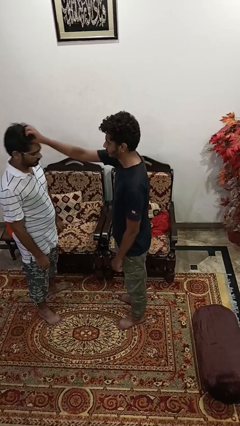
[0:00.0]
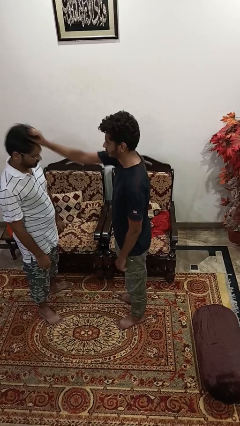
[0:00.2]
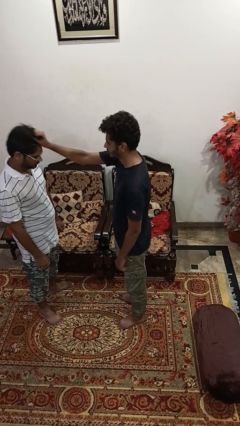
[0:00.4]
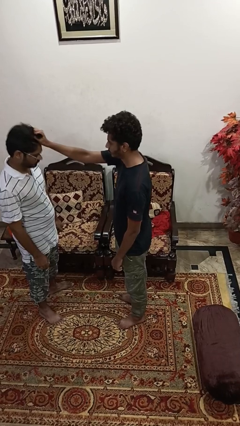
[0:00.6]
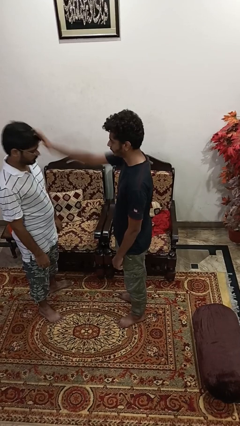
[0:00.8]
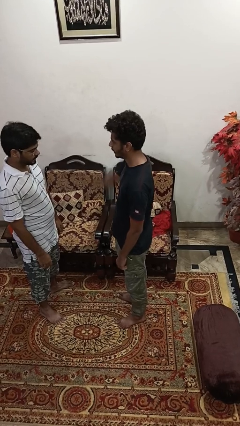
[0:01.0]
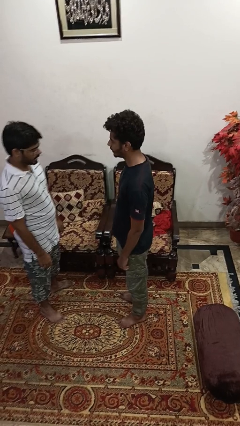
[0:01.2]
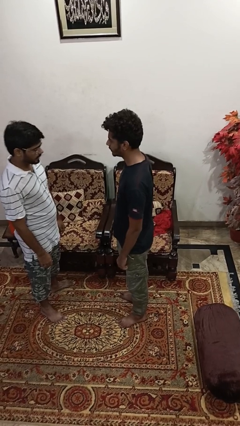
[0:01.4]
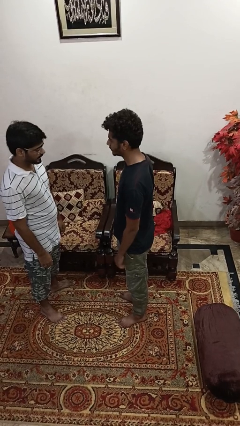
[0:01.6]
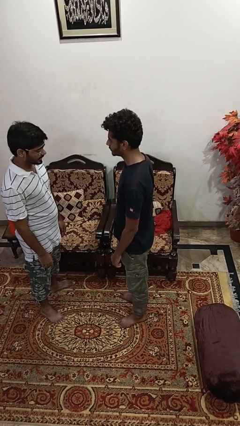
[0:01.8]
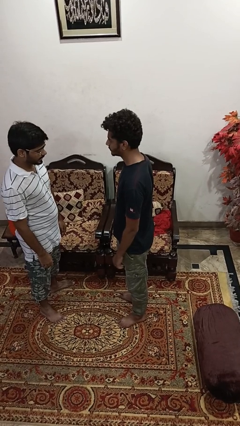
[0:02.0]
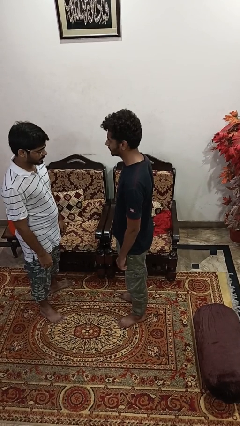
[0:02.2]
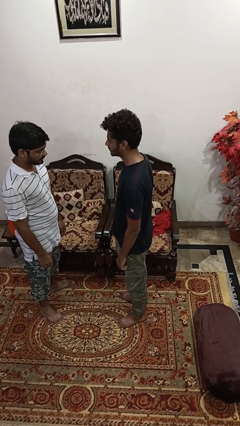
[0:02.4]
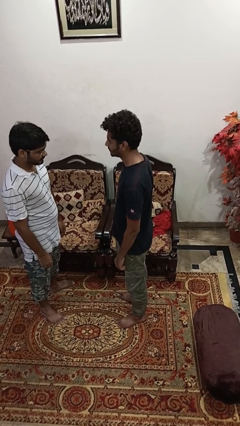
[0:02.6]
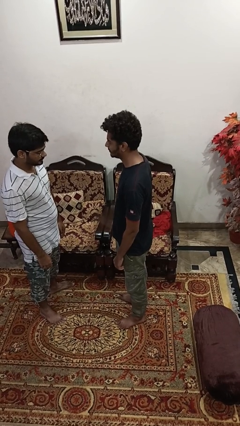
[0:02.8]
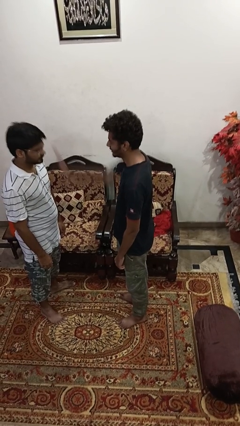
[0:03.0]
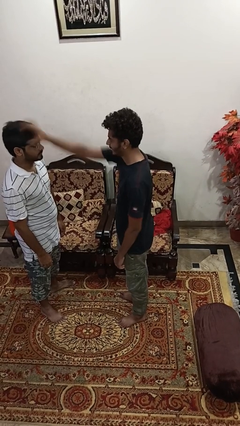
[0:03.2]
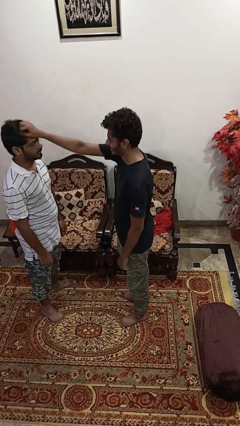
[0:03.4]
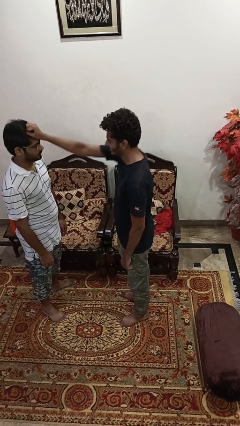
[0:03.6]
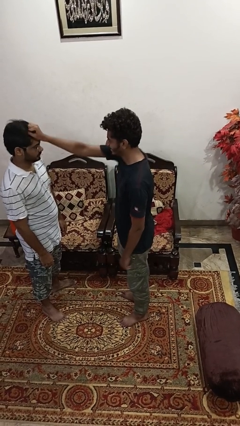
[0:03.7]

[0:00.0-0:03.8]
person grabs person by shoulder

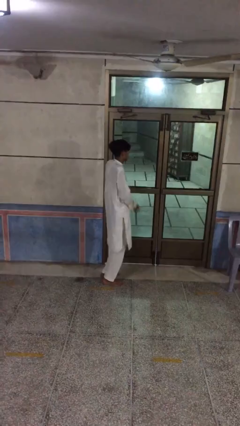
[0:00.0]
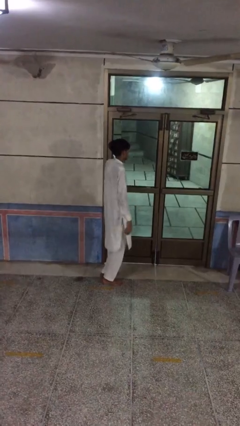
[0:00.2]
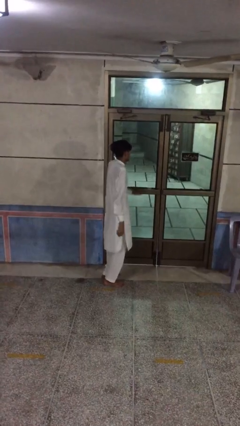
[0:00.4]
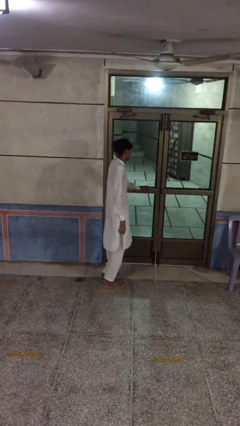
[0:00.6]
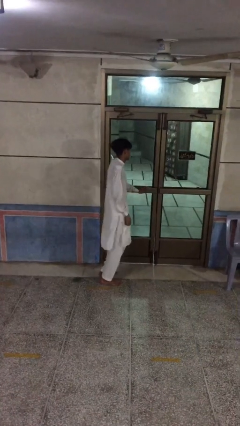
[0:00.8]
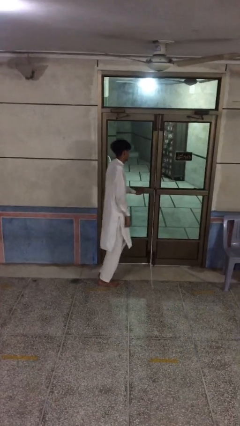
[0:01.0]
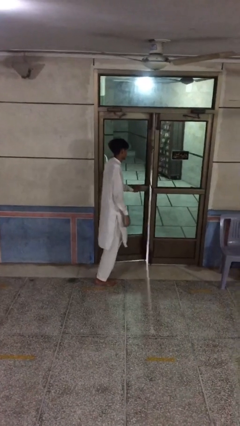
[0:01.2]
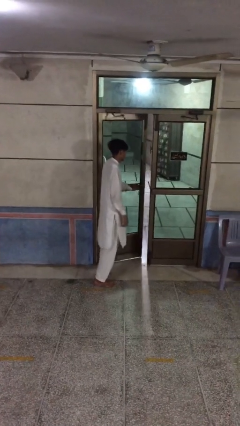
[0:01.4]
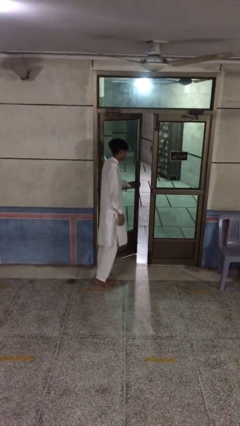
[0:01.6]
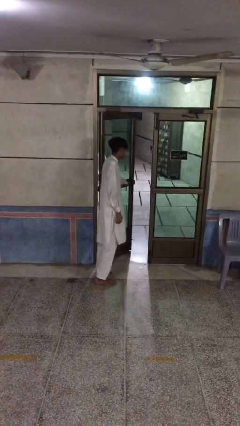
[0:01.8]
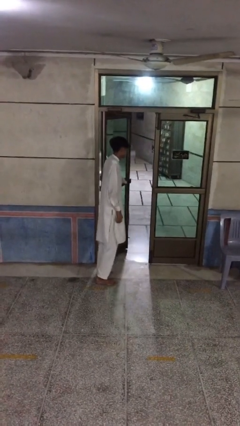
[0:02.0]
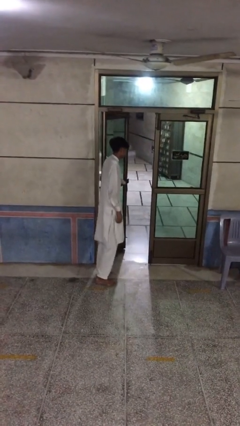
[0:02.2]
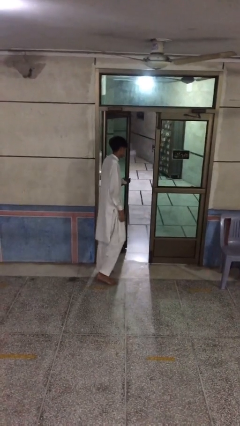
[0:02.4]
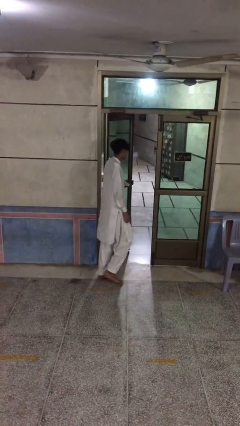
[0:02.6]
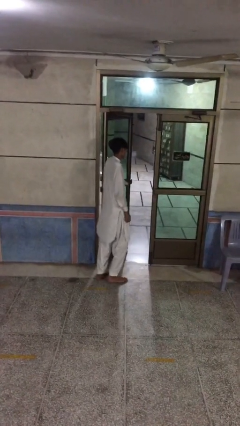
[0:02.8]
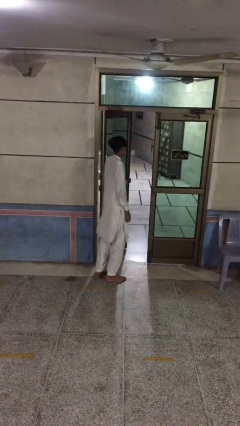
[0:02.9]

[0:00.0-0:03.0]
person opens facility door

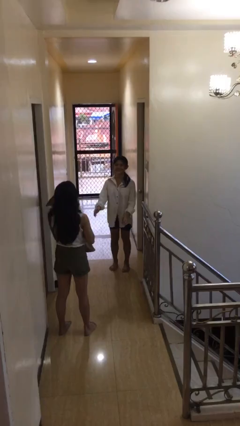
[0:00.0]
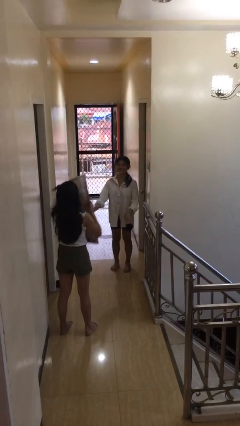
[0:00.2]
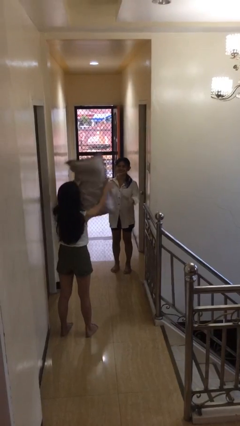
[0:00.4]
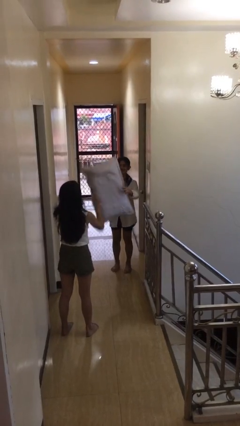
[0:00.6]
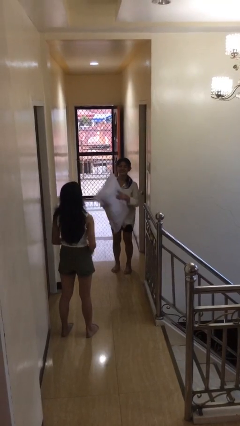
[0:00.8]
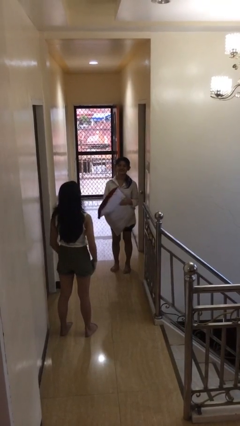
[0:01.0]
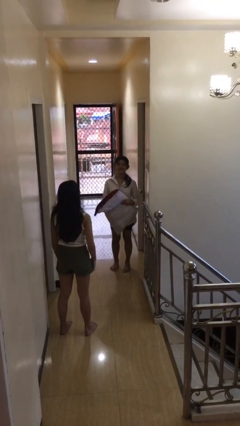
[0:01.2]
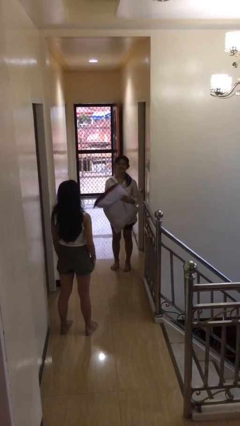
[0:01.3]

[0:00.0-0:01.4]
person catches object from person

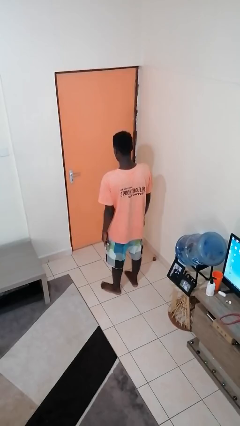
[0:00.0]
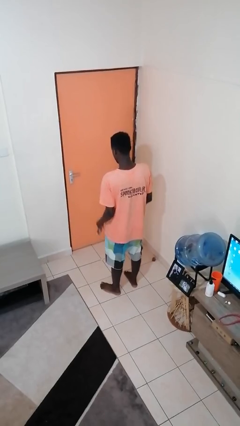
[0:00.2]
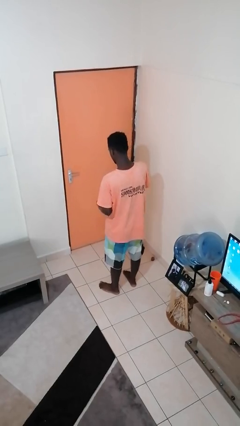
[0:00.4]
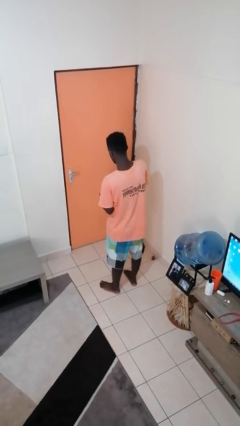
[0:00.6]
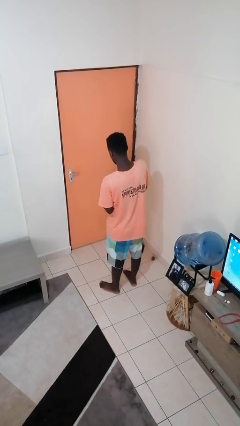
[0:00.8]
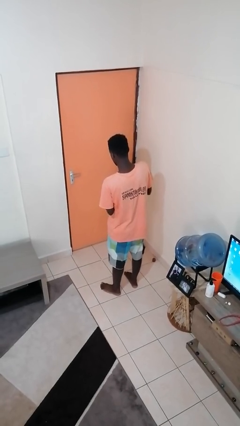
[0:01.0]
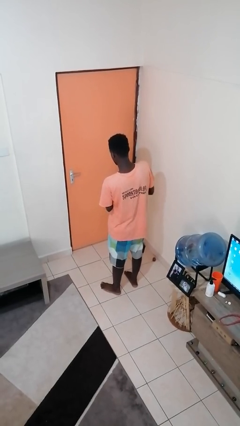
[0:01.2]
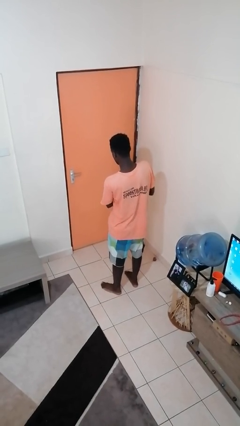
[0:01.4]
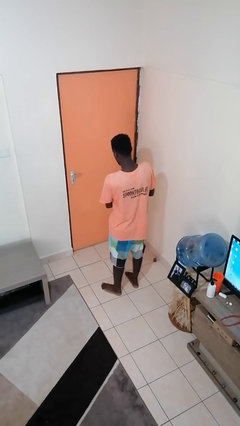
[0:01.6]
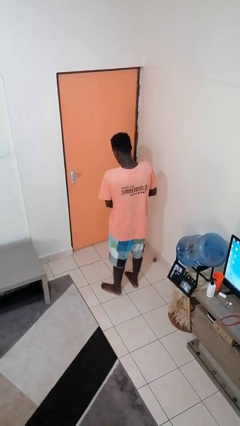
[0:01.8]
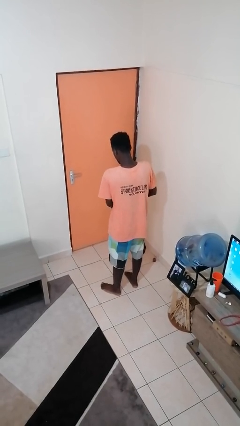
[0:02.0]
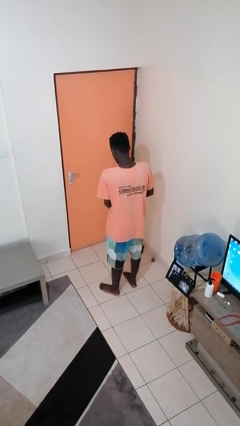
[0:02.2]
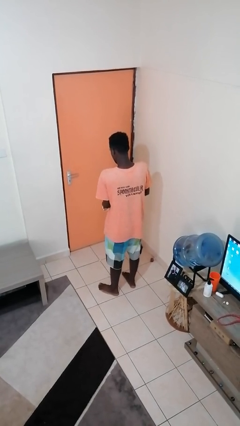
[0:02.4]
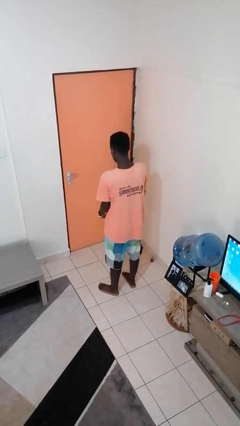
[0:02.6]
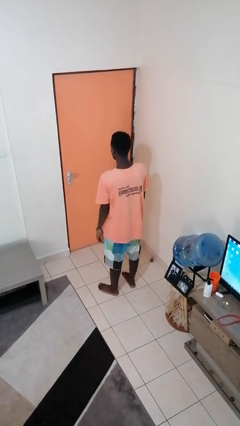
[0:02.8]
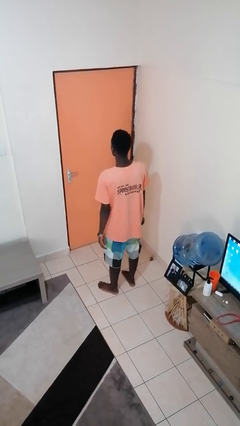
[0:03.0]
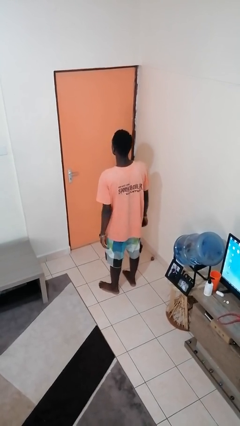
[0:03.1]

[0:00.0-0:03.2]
person puts on wristwatch

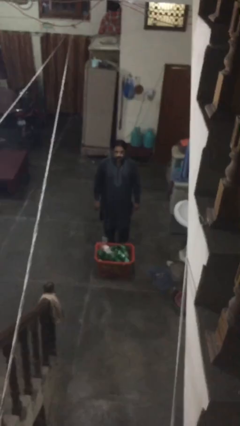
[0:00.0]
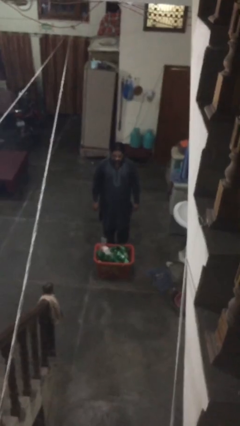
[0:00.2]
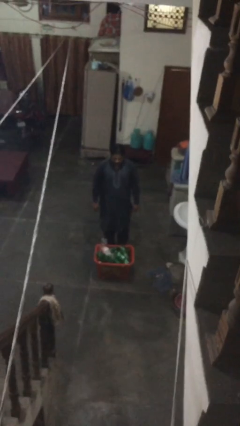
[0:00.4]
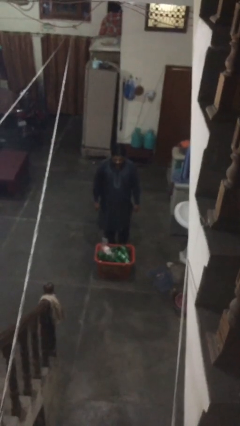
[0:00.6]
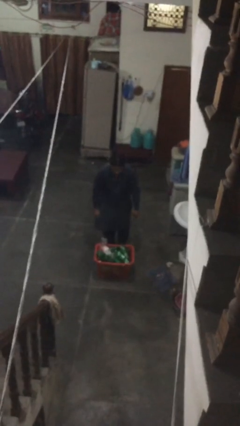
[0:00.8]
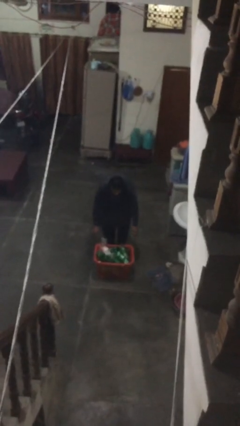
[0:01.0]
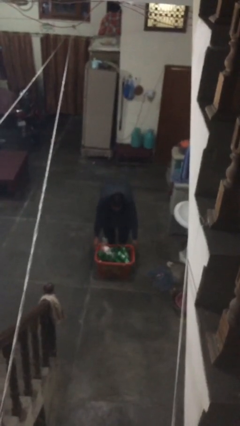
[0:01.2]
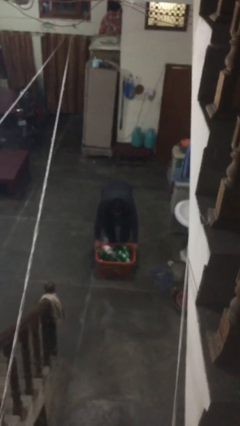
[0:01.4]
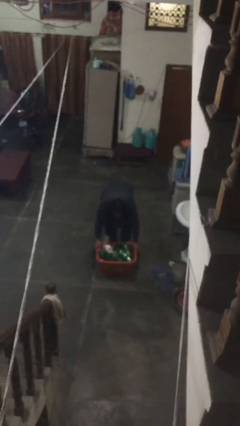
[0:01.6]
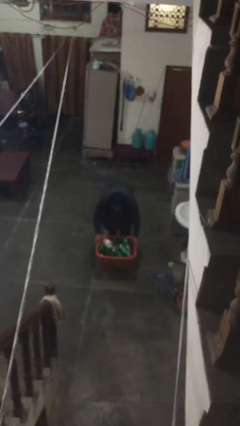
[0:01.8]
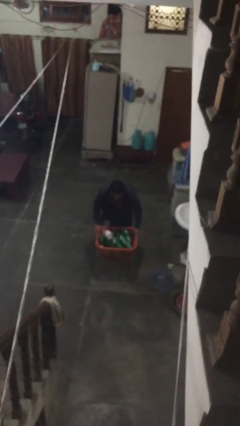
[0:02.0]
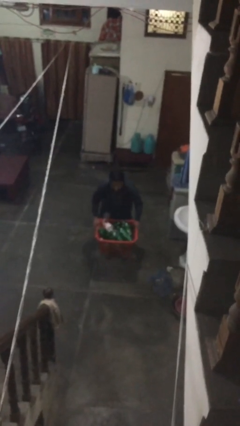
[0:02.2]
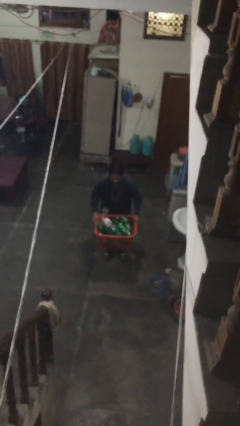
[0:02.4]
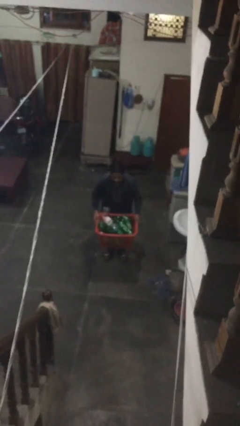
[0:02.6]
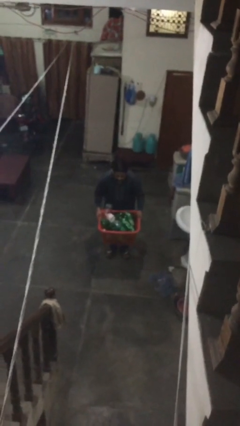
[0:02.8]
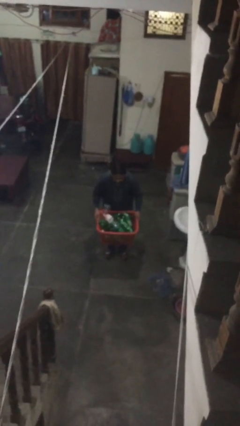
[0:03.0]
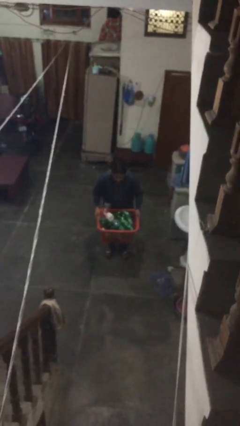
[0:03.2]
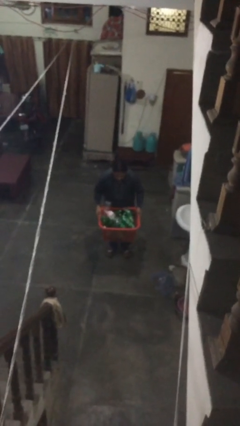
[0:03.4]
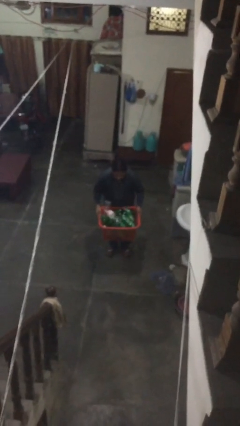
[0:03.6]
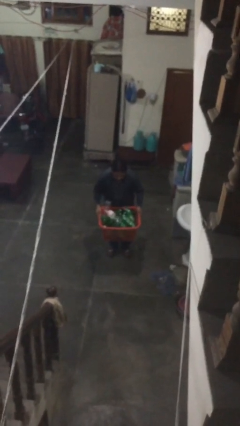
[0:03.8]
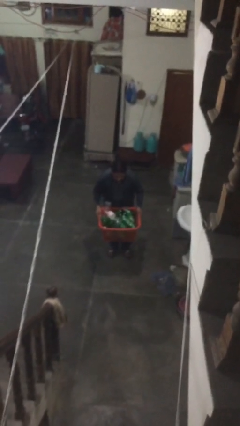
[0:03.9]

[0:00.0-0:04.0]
person picks up object from floor

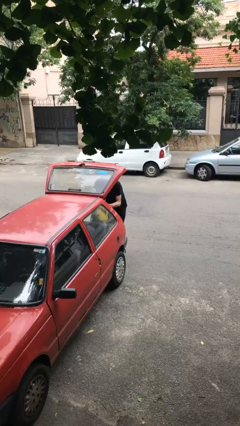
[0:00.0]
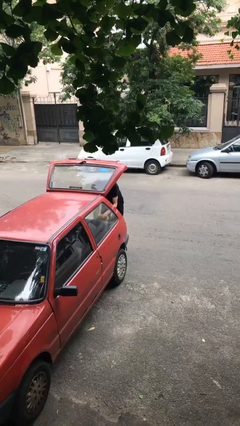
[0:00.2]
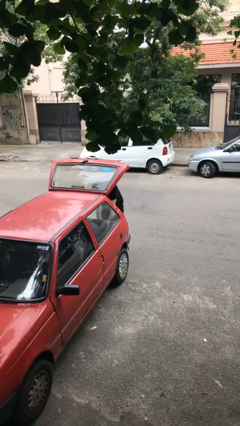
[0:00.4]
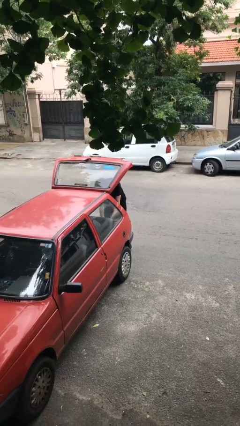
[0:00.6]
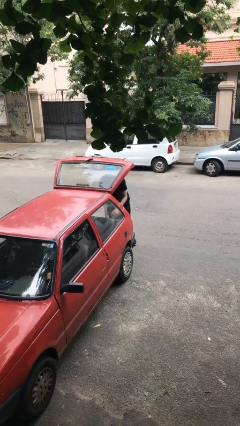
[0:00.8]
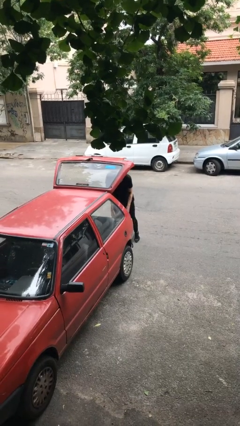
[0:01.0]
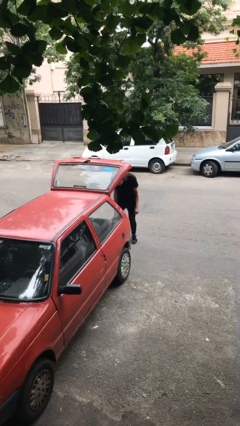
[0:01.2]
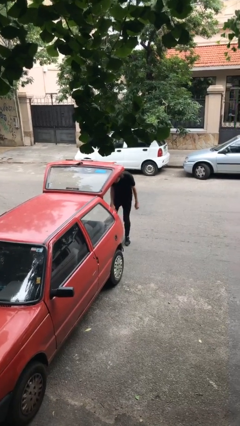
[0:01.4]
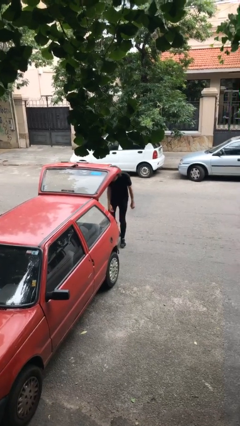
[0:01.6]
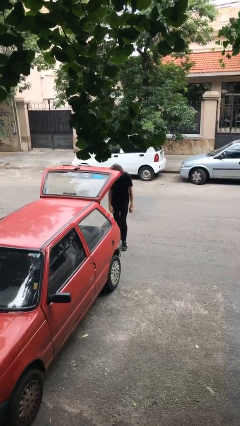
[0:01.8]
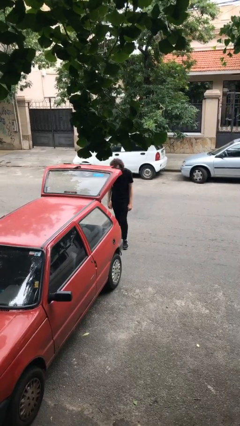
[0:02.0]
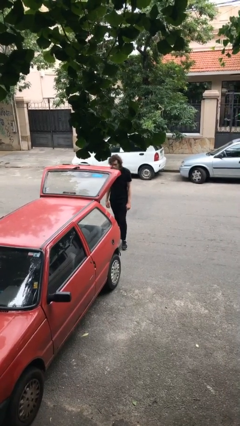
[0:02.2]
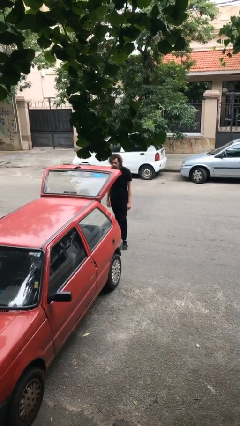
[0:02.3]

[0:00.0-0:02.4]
person loads car
